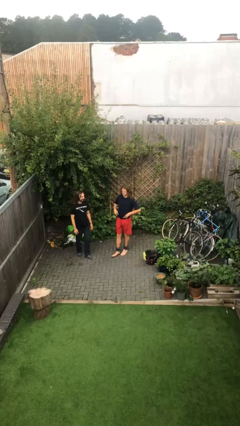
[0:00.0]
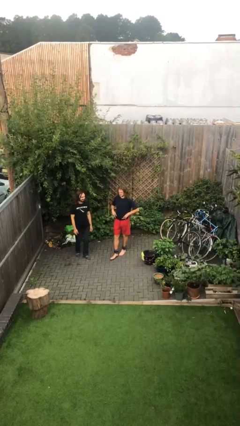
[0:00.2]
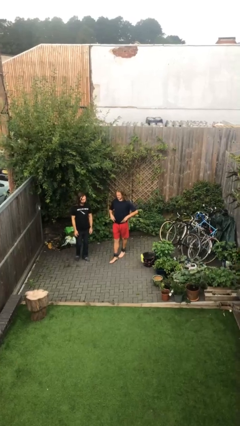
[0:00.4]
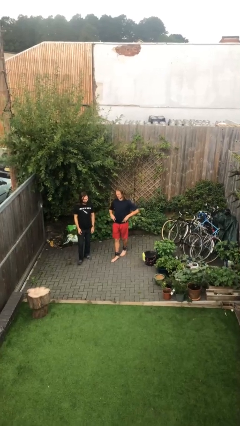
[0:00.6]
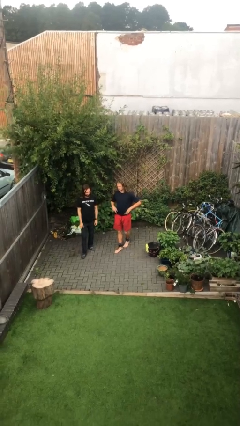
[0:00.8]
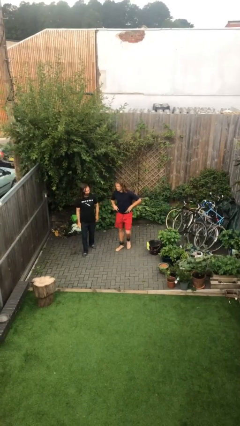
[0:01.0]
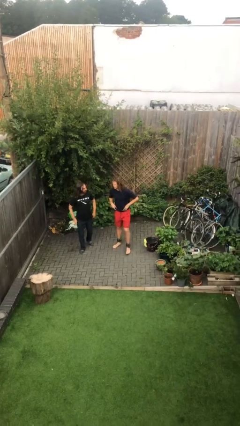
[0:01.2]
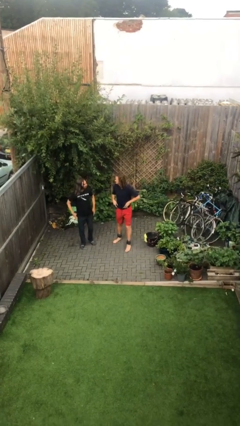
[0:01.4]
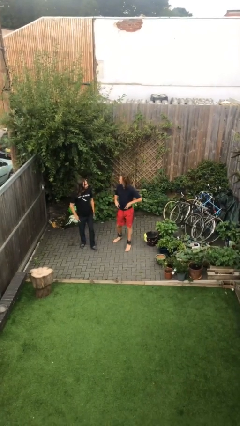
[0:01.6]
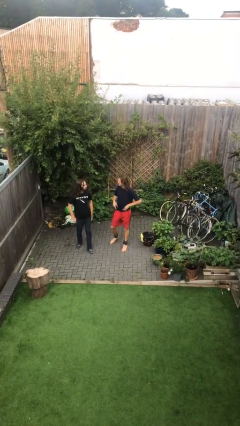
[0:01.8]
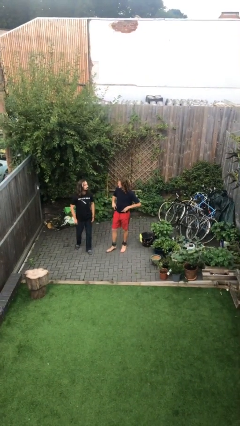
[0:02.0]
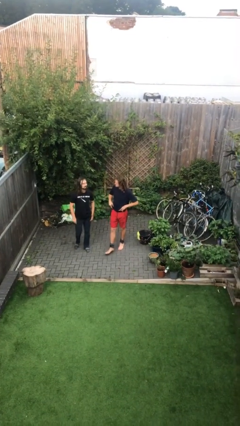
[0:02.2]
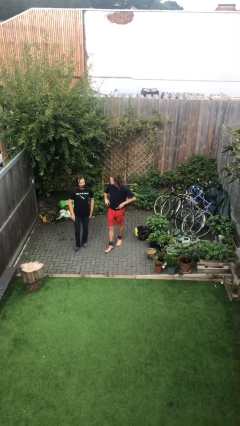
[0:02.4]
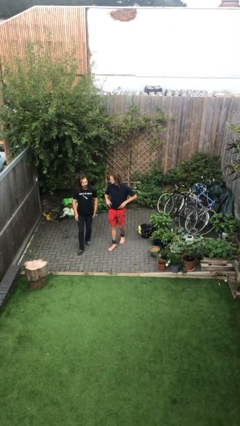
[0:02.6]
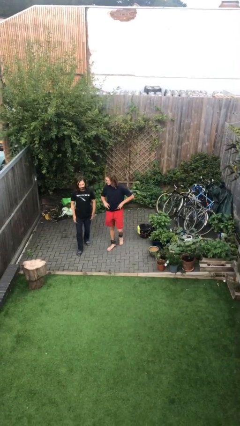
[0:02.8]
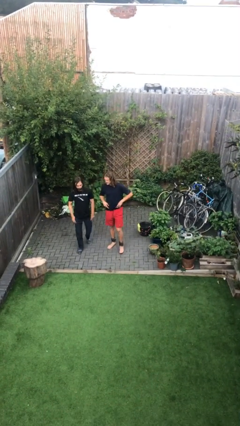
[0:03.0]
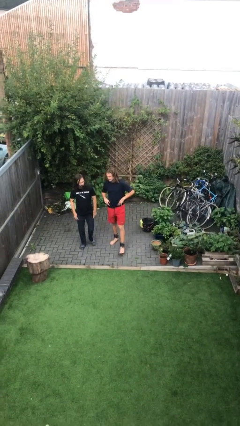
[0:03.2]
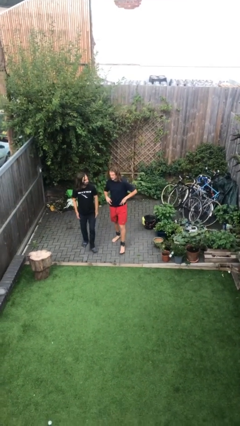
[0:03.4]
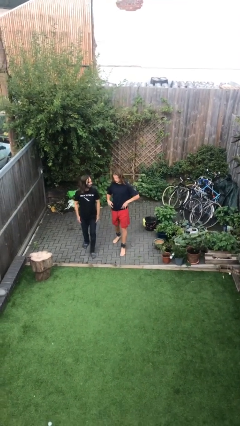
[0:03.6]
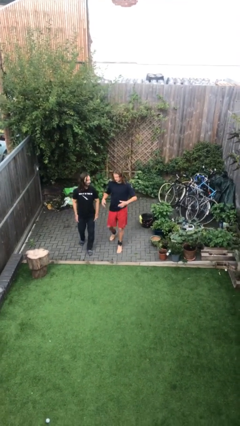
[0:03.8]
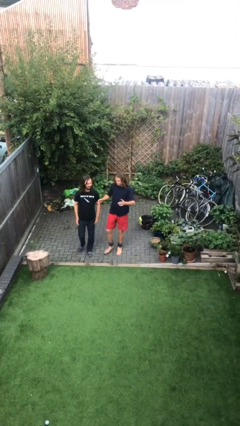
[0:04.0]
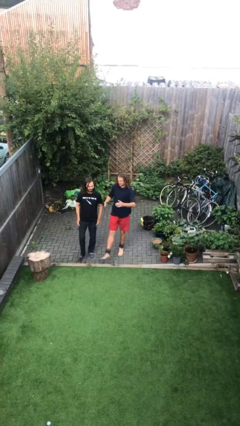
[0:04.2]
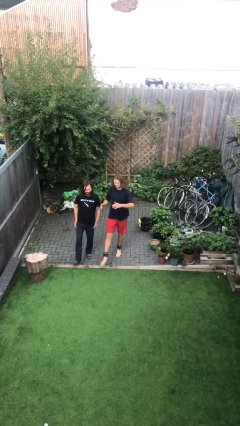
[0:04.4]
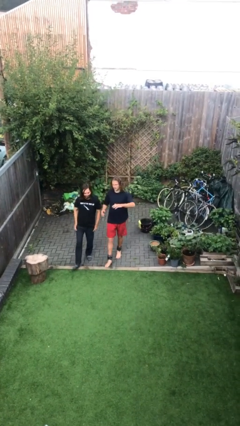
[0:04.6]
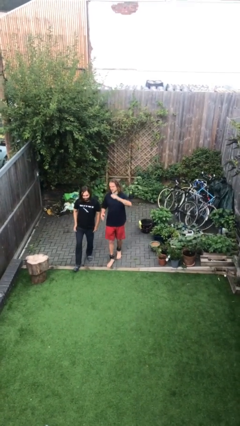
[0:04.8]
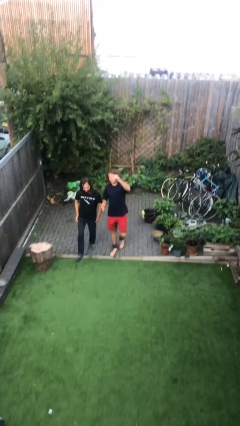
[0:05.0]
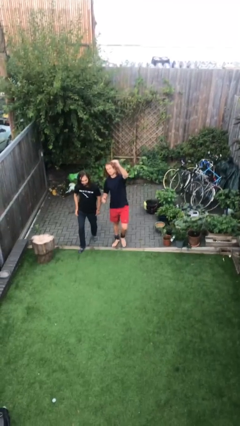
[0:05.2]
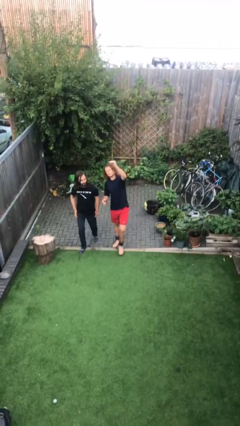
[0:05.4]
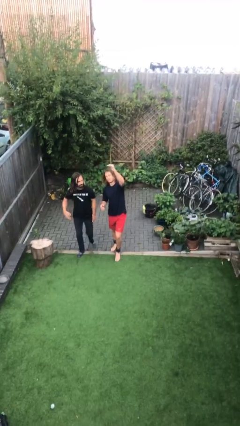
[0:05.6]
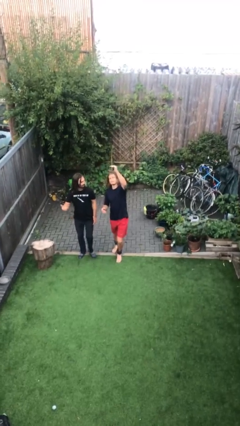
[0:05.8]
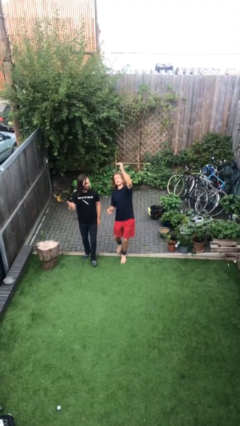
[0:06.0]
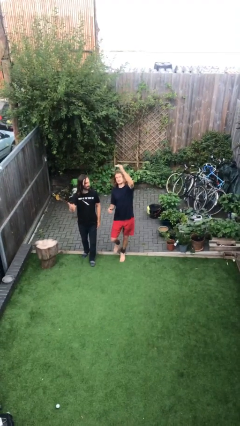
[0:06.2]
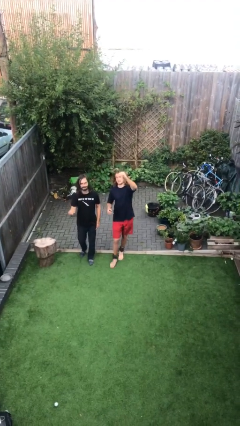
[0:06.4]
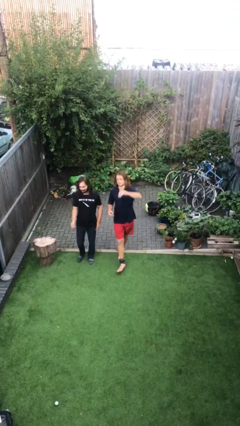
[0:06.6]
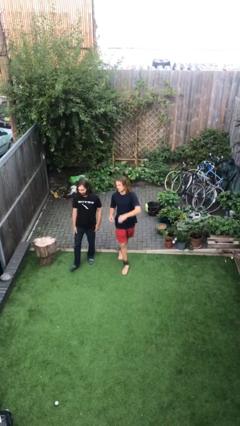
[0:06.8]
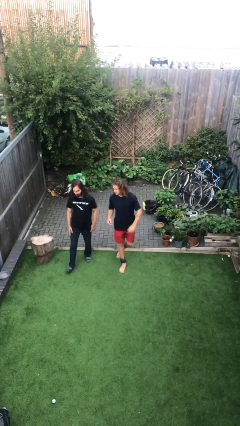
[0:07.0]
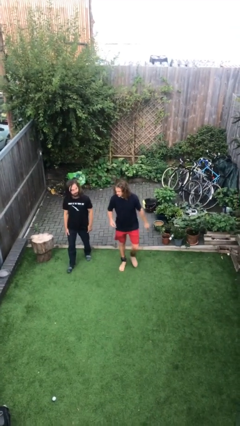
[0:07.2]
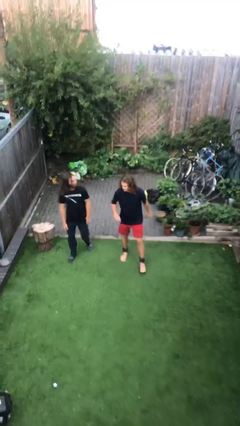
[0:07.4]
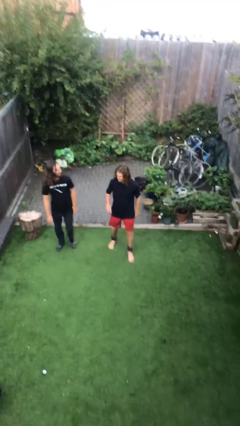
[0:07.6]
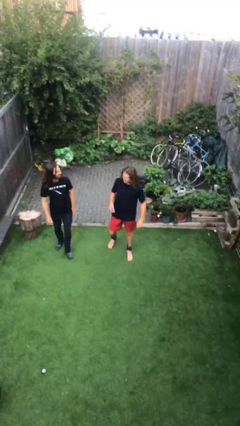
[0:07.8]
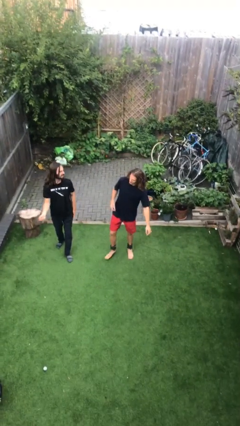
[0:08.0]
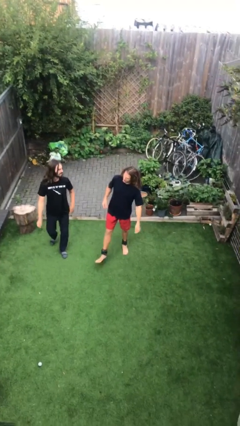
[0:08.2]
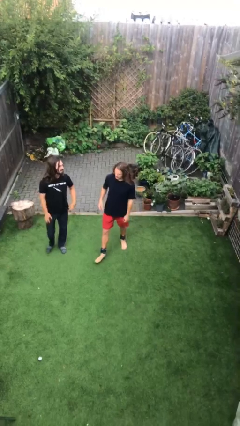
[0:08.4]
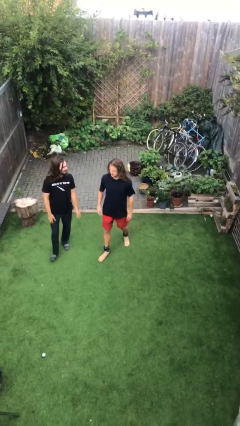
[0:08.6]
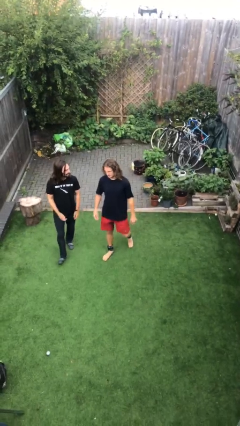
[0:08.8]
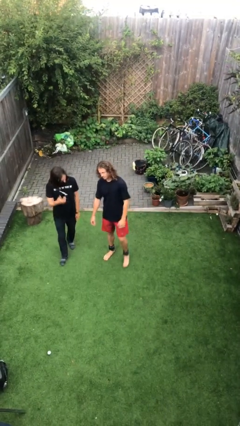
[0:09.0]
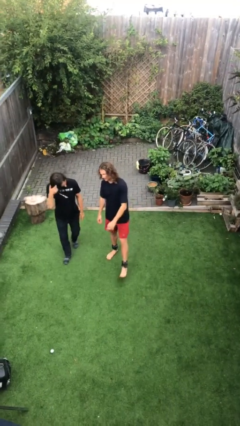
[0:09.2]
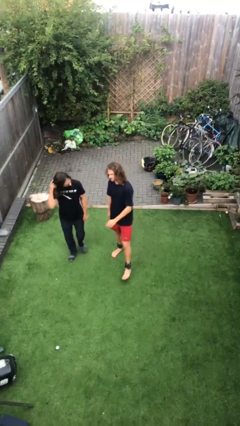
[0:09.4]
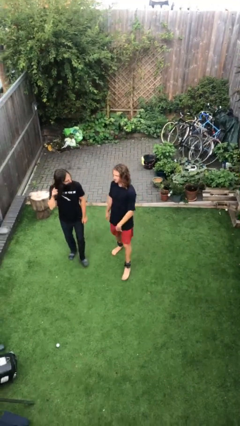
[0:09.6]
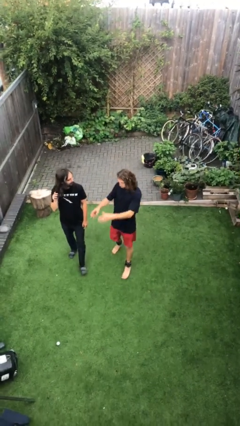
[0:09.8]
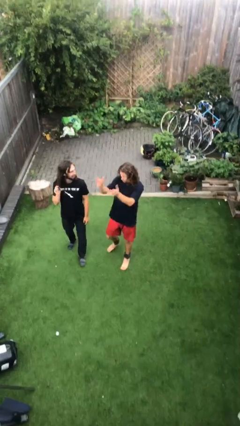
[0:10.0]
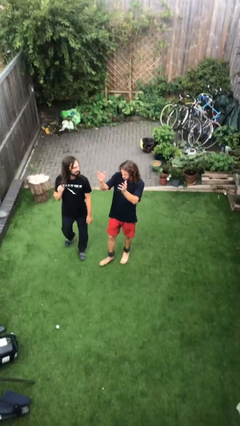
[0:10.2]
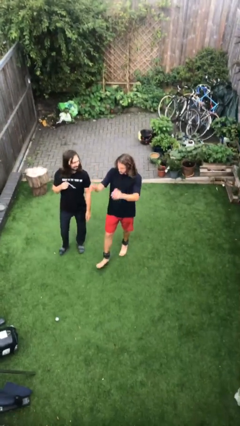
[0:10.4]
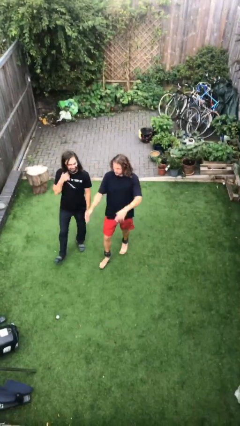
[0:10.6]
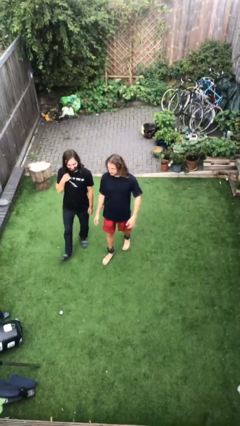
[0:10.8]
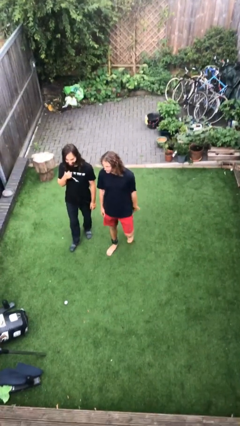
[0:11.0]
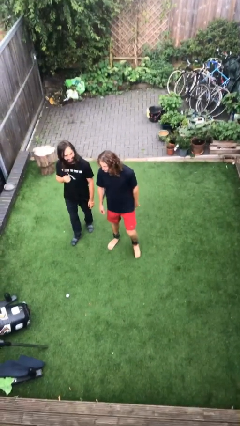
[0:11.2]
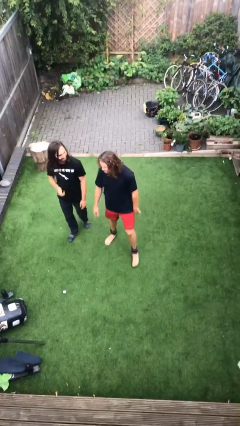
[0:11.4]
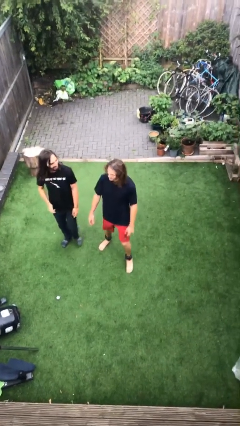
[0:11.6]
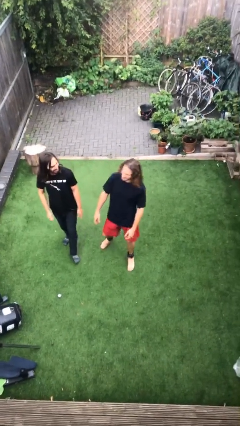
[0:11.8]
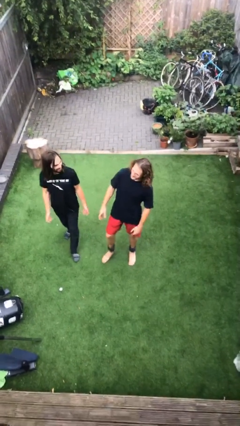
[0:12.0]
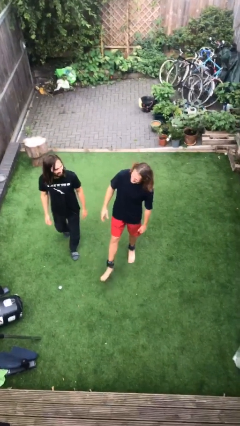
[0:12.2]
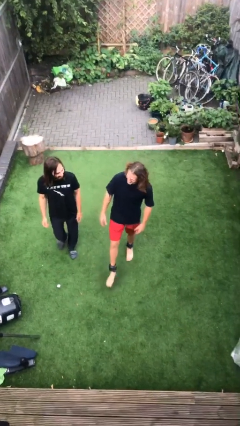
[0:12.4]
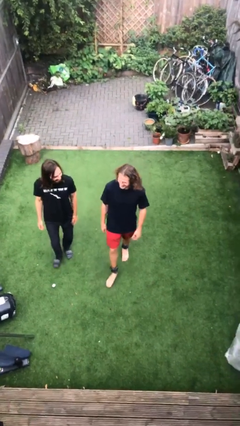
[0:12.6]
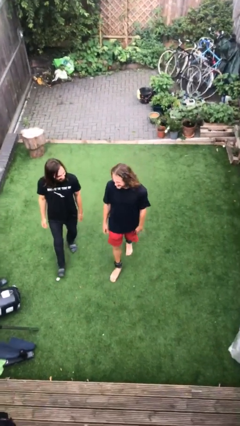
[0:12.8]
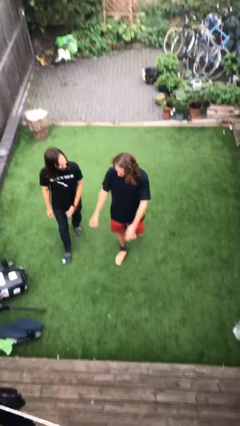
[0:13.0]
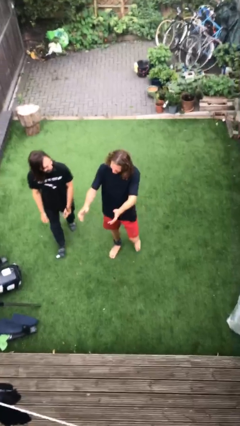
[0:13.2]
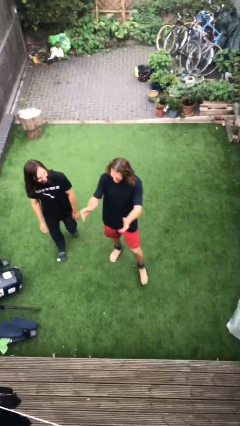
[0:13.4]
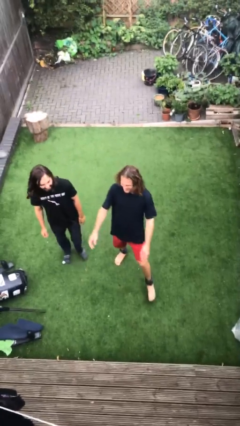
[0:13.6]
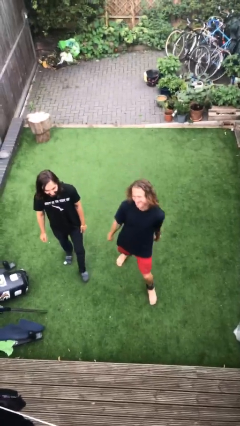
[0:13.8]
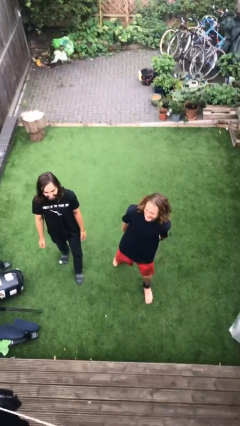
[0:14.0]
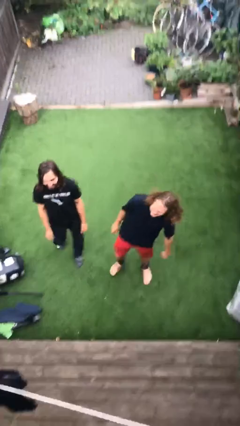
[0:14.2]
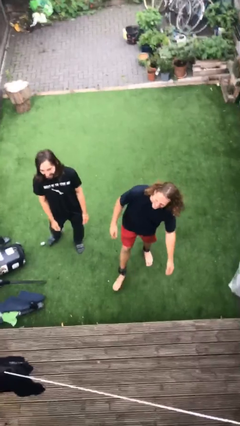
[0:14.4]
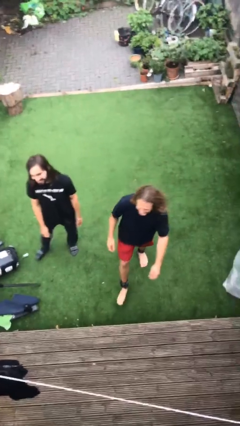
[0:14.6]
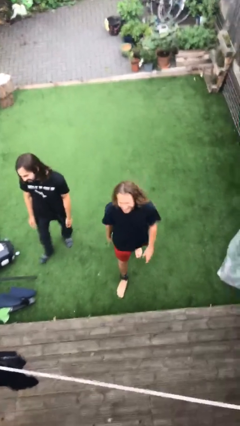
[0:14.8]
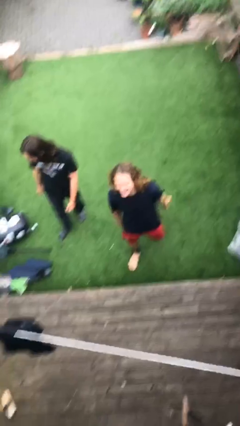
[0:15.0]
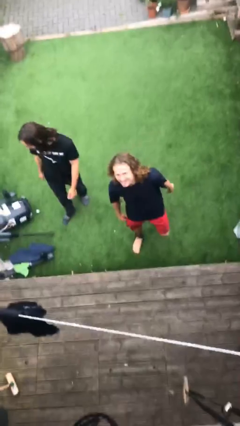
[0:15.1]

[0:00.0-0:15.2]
person talks to person

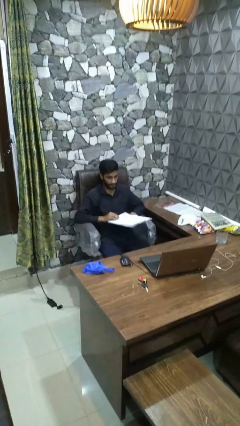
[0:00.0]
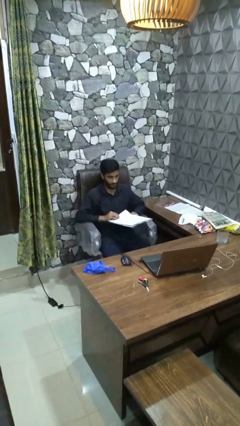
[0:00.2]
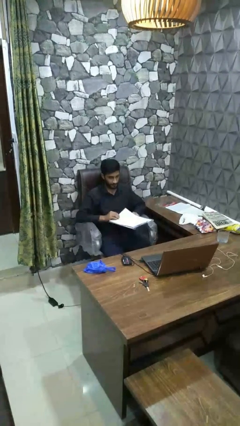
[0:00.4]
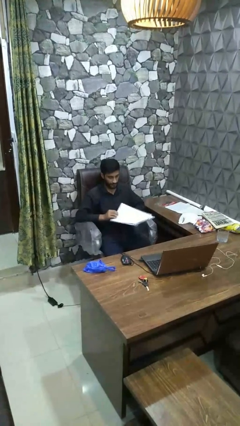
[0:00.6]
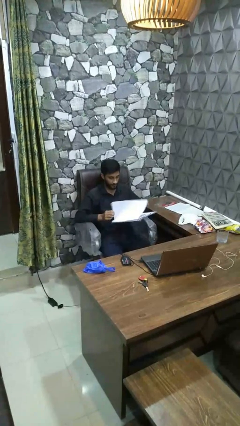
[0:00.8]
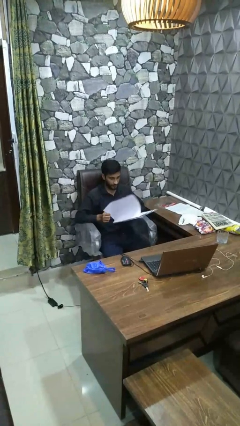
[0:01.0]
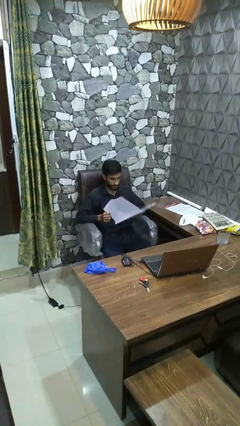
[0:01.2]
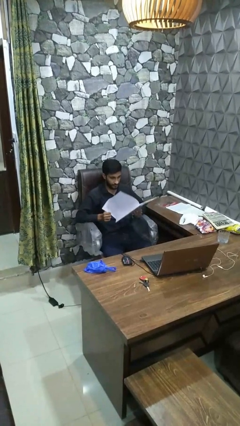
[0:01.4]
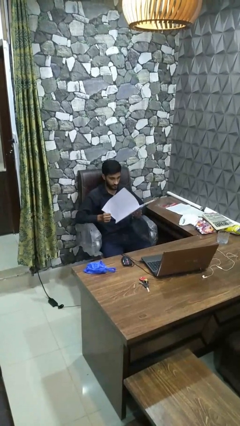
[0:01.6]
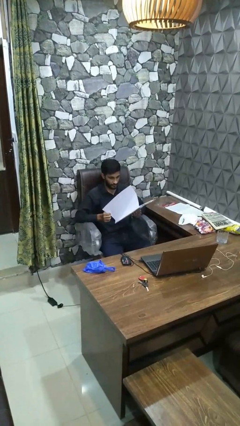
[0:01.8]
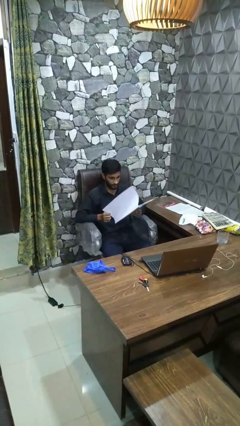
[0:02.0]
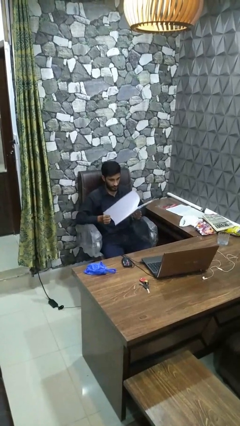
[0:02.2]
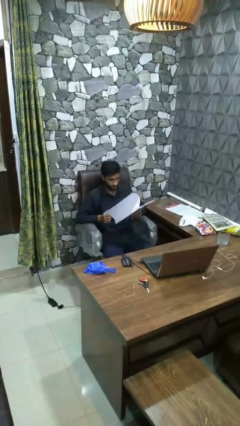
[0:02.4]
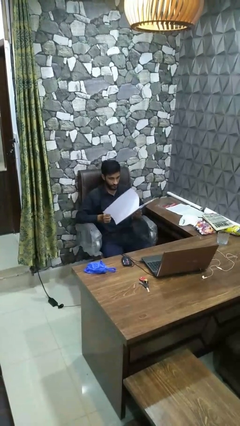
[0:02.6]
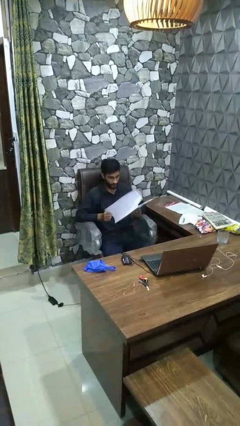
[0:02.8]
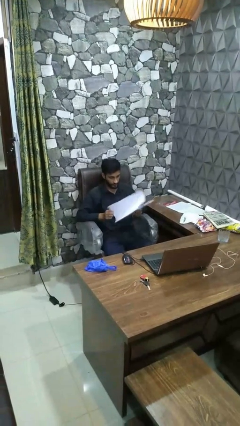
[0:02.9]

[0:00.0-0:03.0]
person reads book
